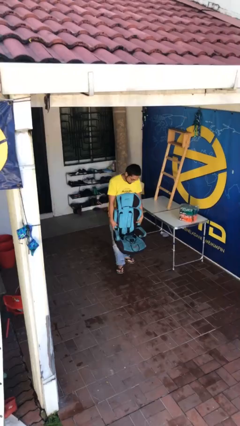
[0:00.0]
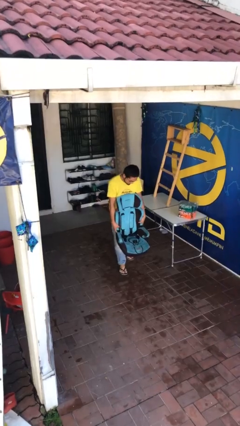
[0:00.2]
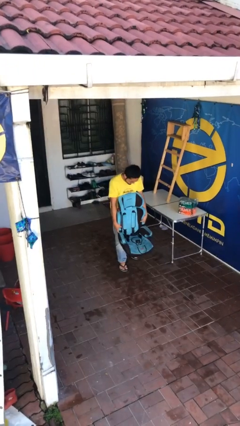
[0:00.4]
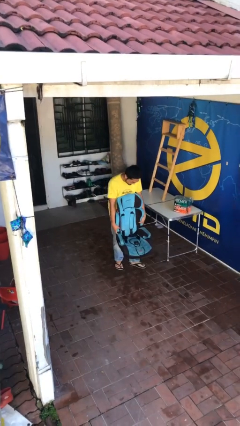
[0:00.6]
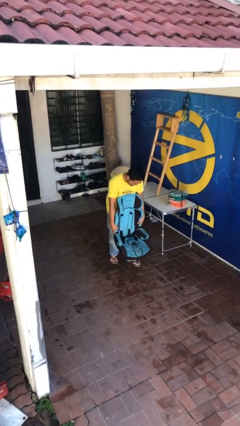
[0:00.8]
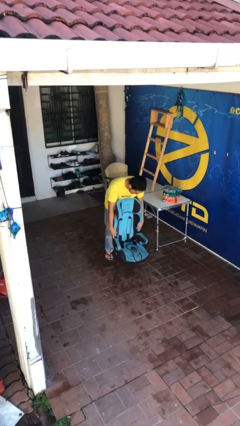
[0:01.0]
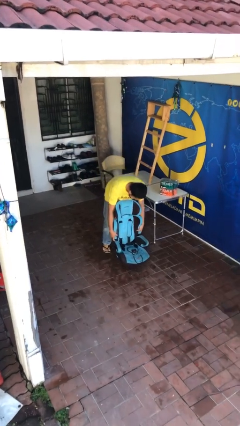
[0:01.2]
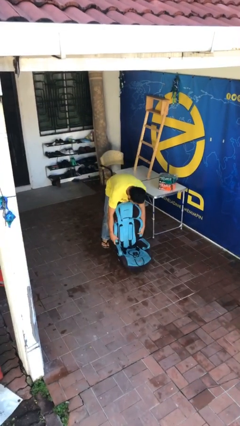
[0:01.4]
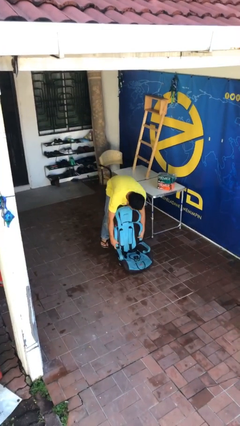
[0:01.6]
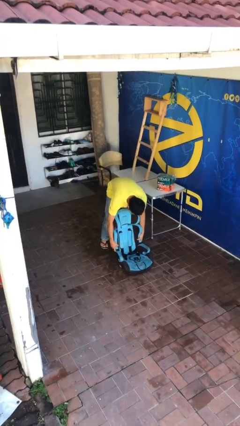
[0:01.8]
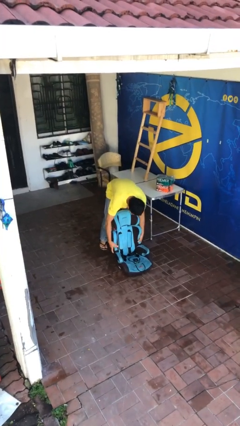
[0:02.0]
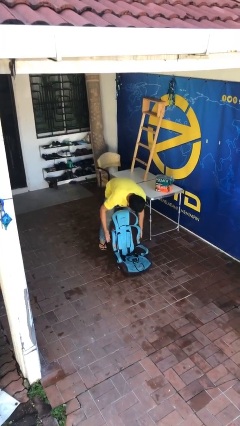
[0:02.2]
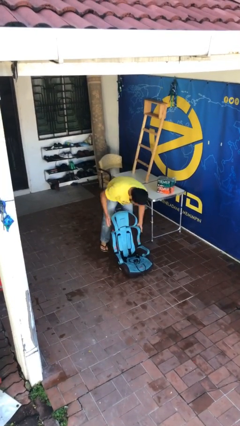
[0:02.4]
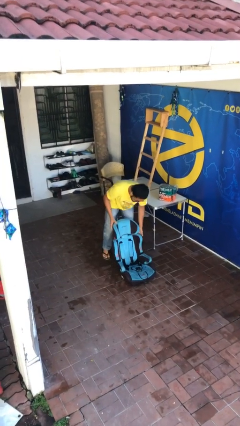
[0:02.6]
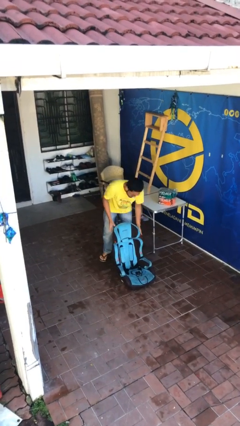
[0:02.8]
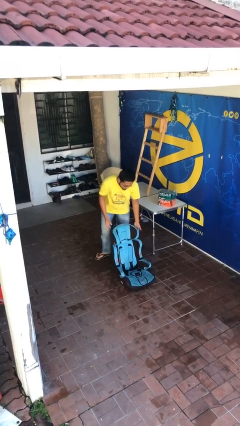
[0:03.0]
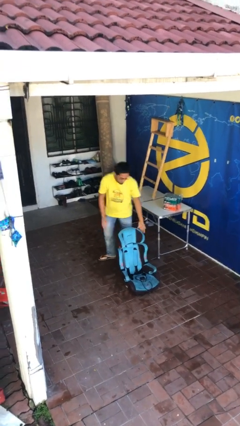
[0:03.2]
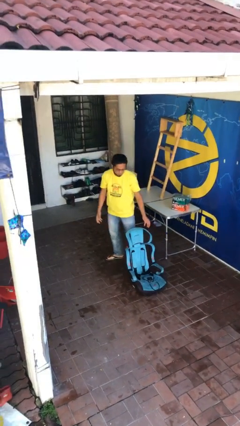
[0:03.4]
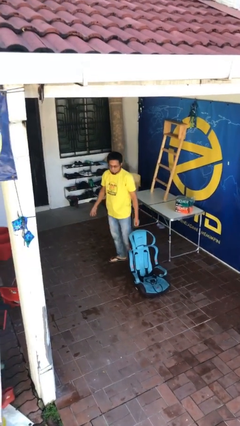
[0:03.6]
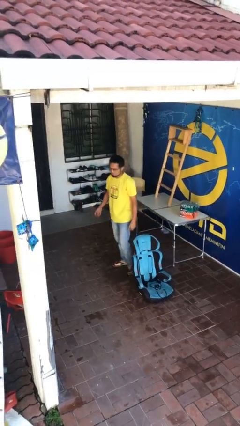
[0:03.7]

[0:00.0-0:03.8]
person puts down object on floor

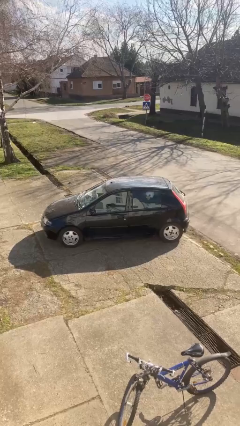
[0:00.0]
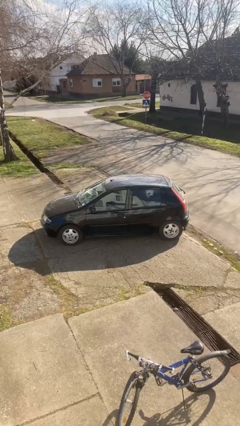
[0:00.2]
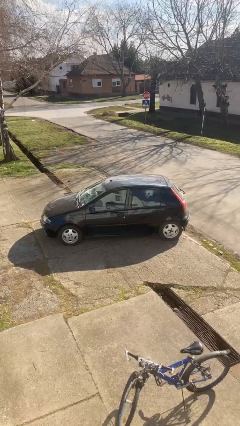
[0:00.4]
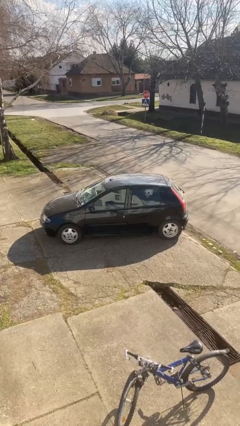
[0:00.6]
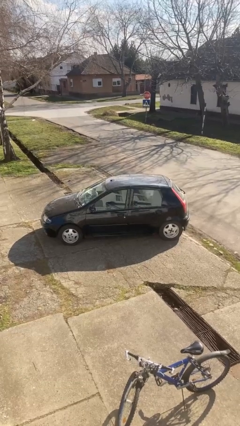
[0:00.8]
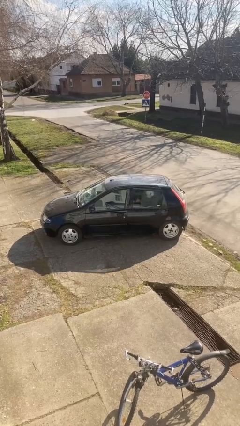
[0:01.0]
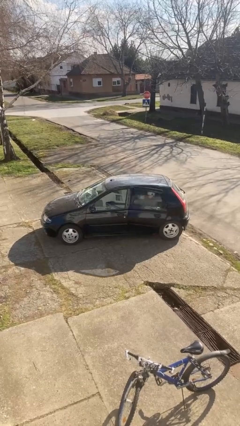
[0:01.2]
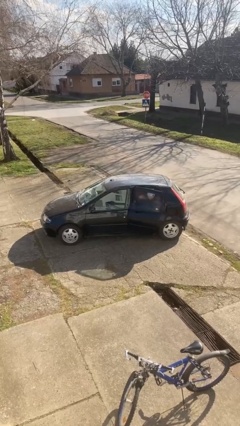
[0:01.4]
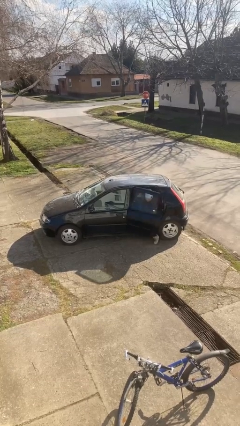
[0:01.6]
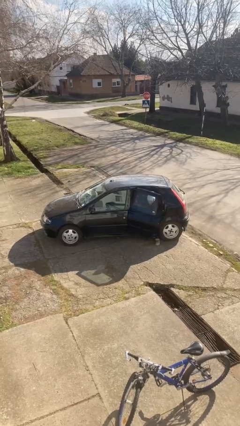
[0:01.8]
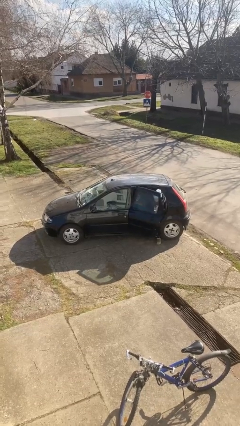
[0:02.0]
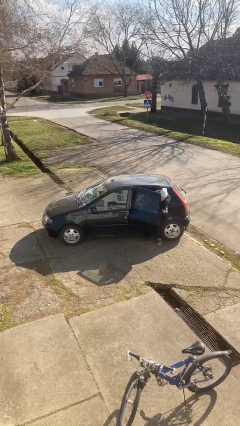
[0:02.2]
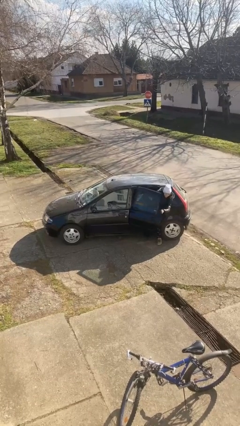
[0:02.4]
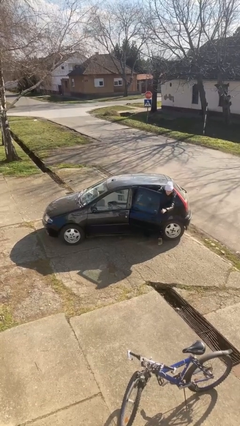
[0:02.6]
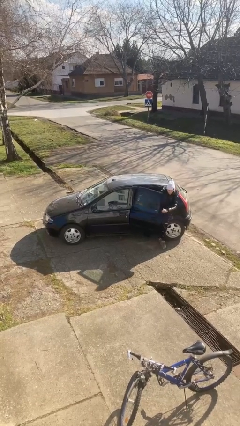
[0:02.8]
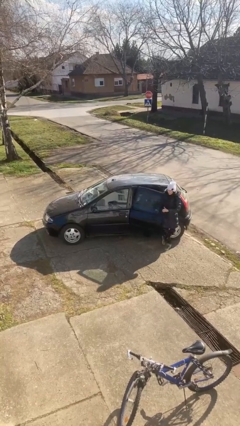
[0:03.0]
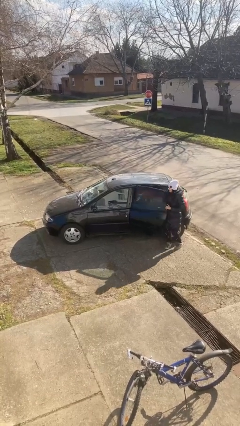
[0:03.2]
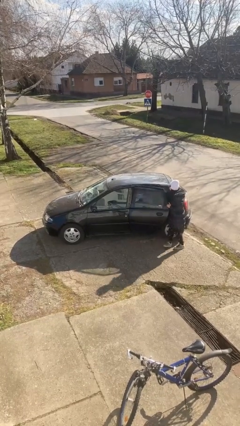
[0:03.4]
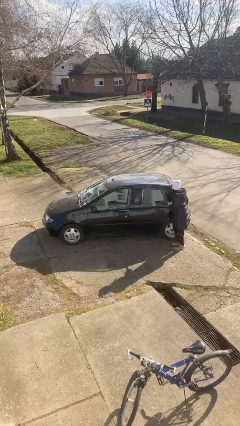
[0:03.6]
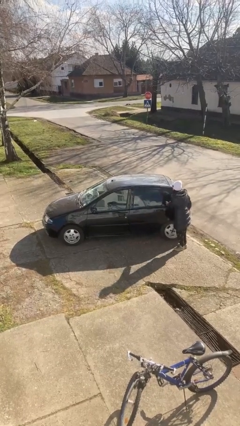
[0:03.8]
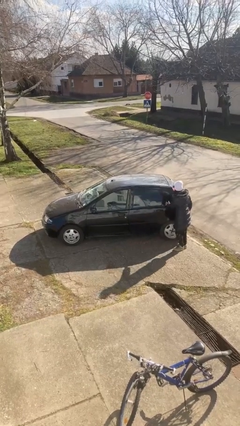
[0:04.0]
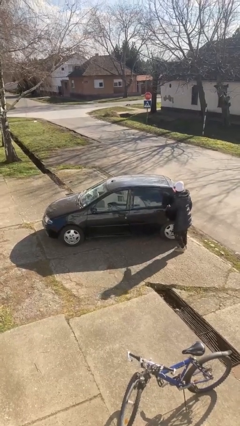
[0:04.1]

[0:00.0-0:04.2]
car drops off person

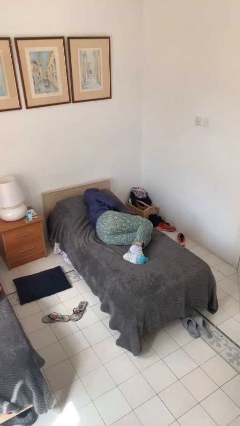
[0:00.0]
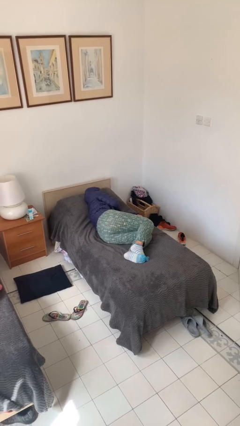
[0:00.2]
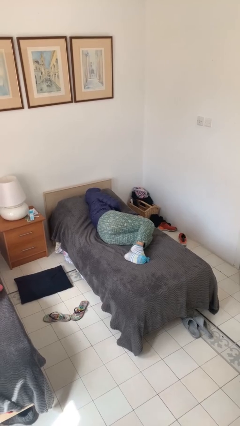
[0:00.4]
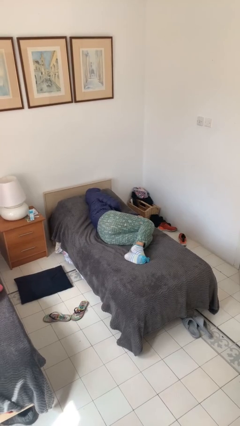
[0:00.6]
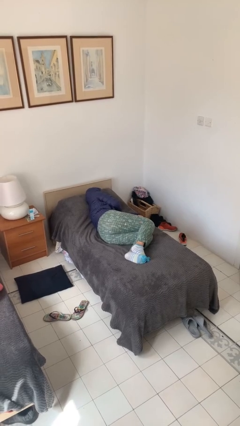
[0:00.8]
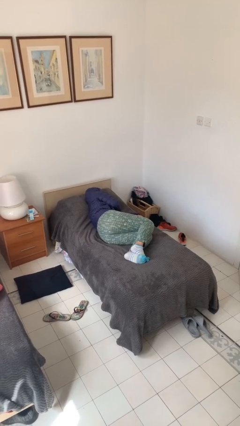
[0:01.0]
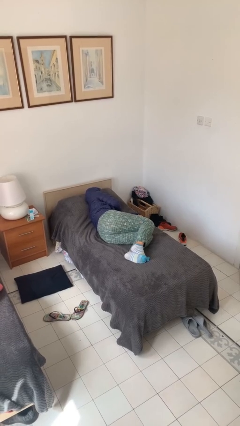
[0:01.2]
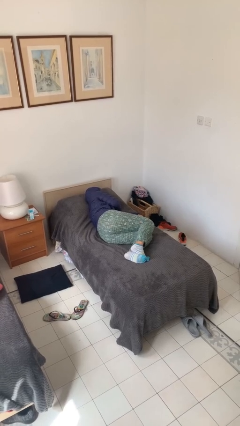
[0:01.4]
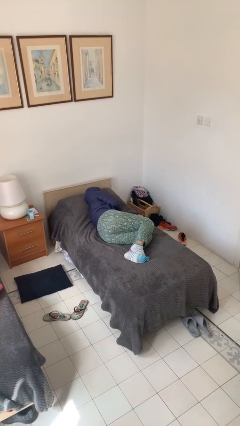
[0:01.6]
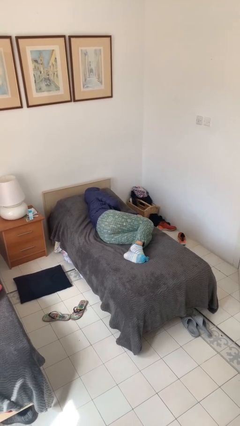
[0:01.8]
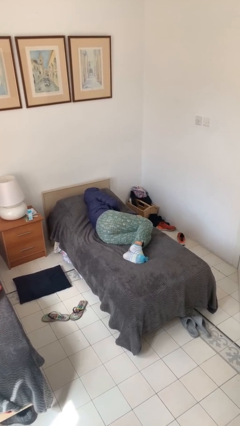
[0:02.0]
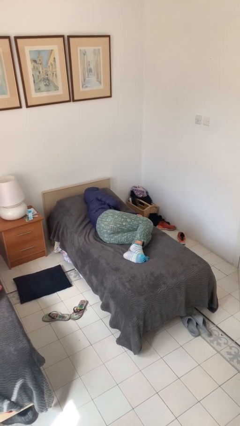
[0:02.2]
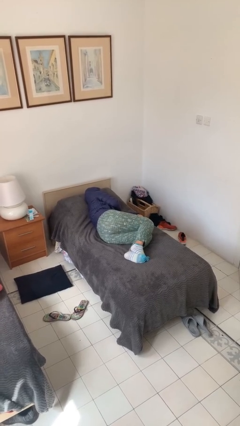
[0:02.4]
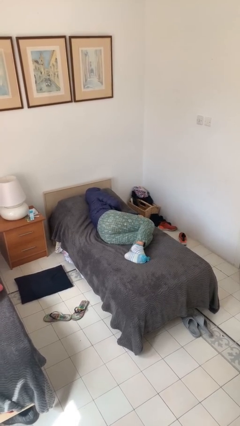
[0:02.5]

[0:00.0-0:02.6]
person falls from bed

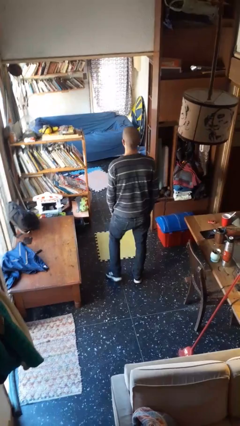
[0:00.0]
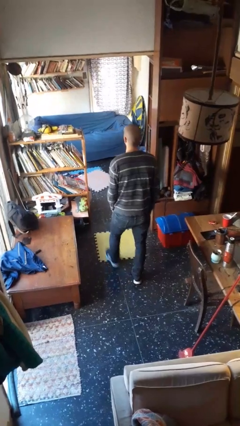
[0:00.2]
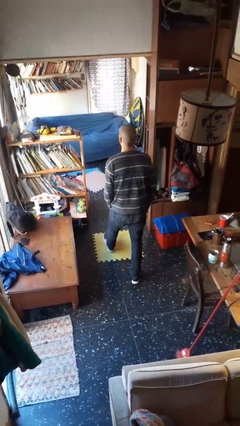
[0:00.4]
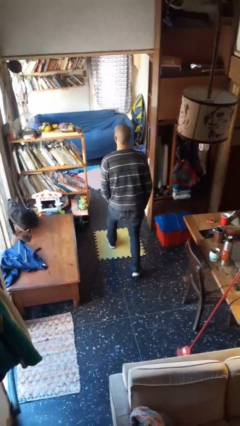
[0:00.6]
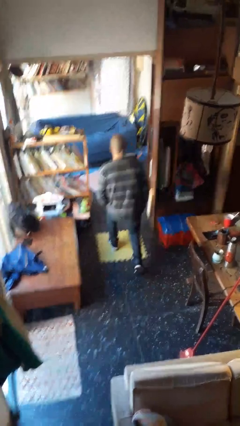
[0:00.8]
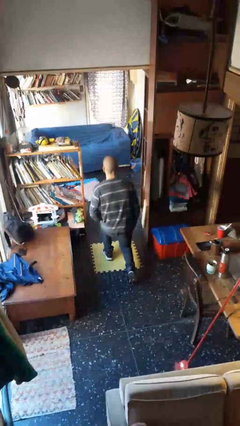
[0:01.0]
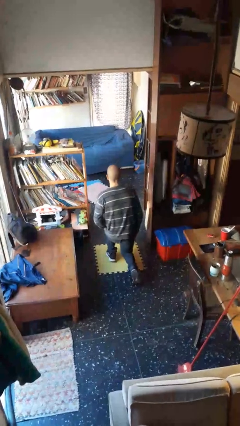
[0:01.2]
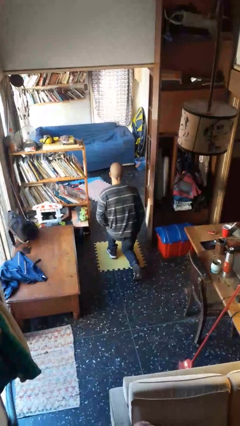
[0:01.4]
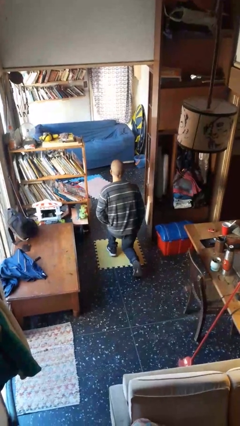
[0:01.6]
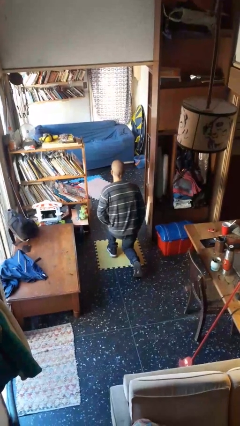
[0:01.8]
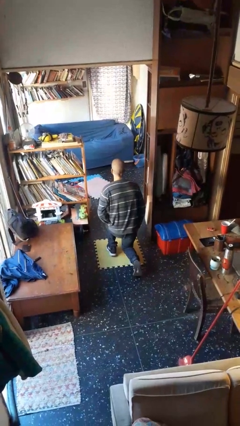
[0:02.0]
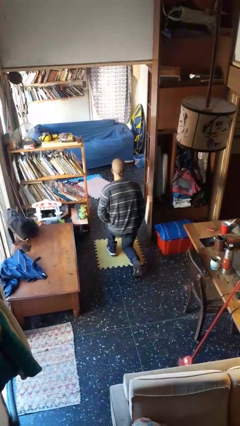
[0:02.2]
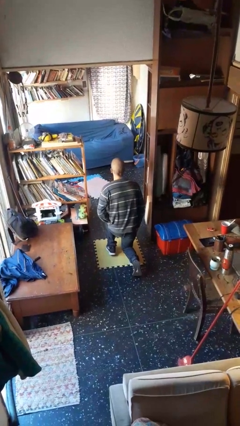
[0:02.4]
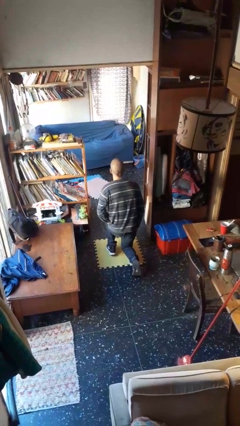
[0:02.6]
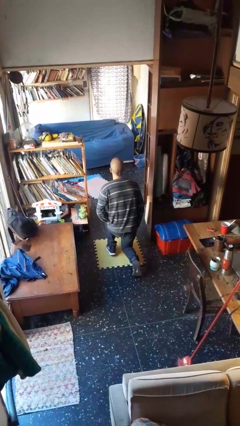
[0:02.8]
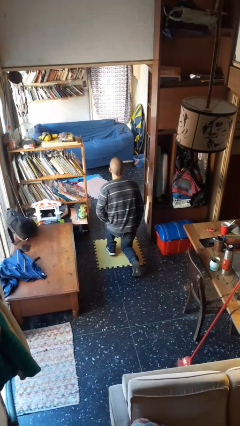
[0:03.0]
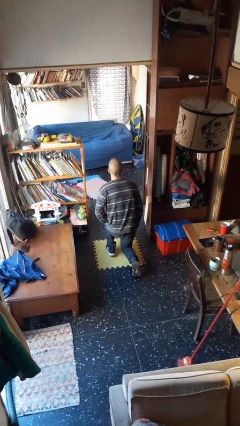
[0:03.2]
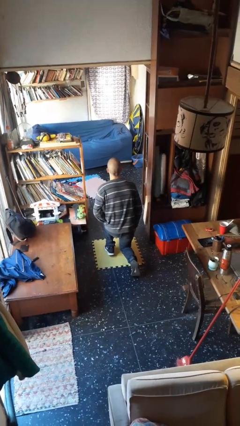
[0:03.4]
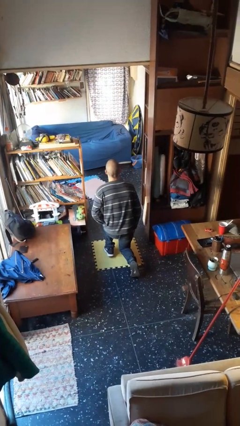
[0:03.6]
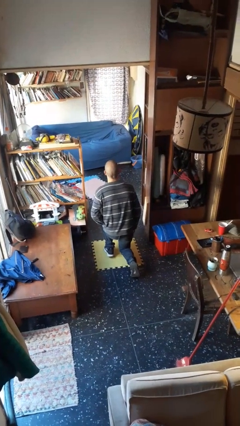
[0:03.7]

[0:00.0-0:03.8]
person kneels

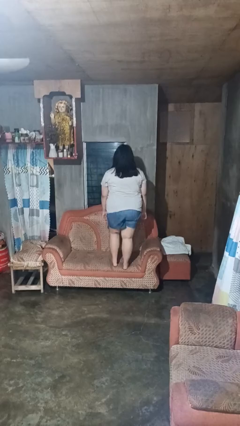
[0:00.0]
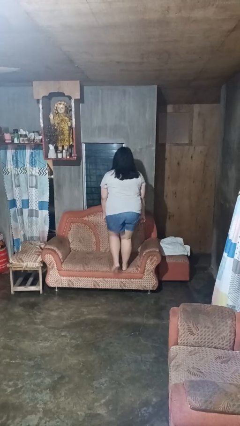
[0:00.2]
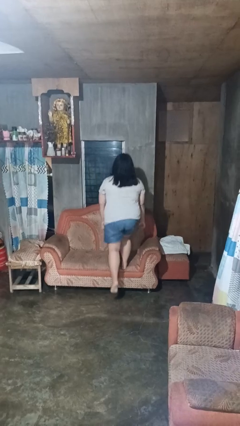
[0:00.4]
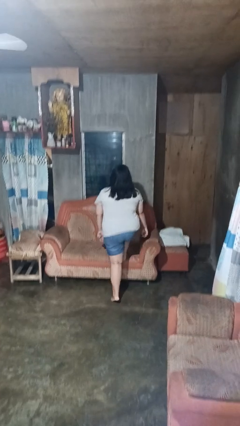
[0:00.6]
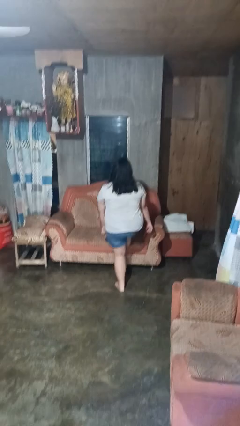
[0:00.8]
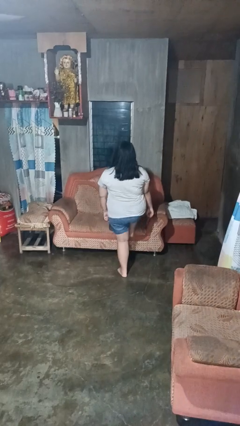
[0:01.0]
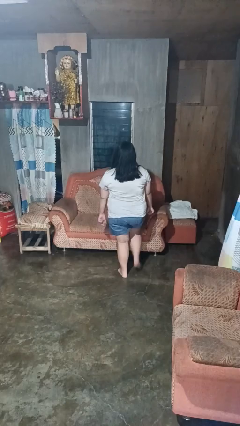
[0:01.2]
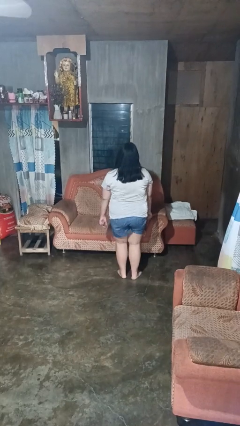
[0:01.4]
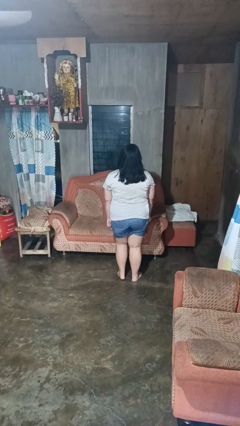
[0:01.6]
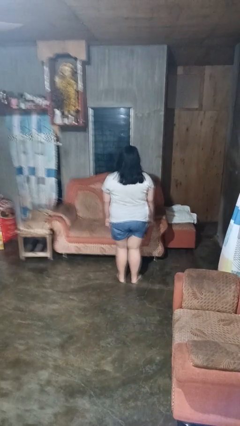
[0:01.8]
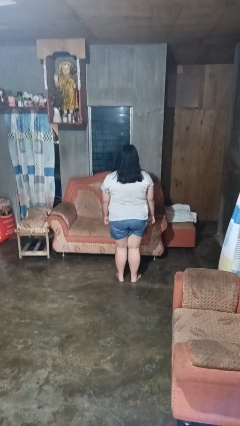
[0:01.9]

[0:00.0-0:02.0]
person climbs off couch

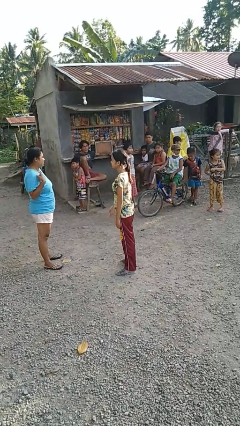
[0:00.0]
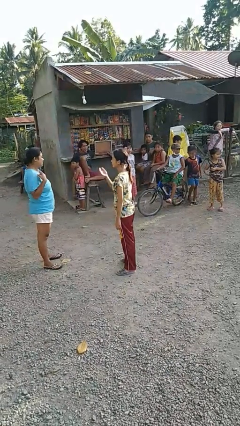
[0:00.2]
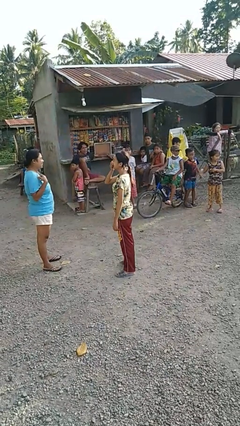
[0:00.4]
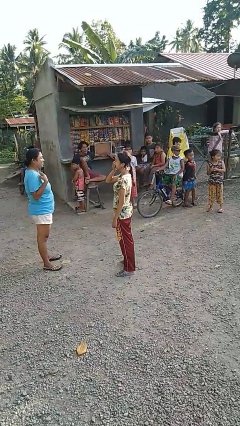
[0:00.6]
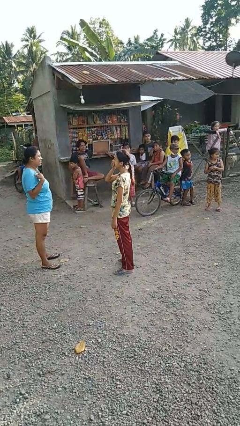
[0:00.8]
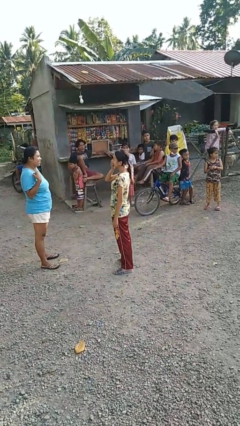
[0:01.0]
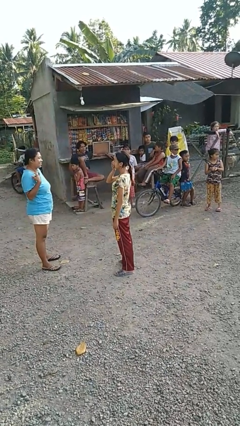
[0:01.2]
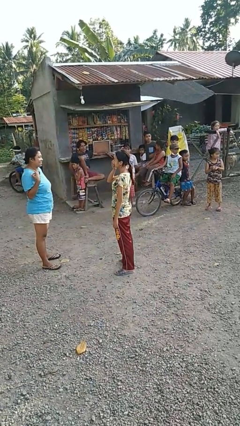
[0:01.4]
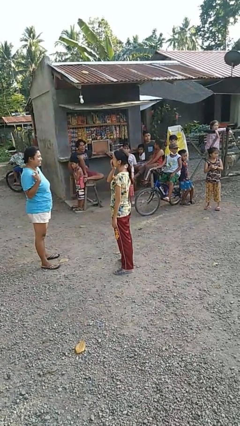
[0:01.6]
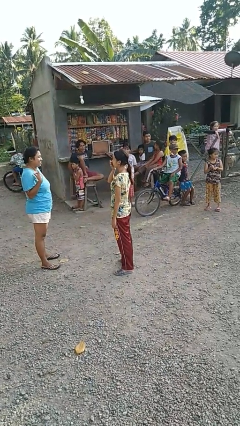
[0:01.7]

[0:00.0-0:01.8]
person laughs with person
